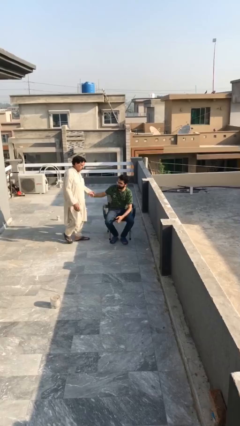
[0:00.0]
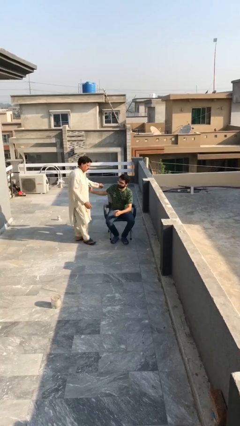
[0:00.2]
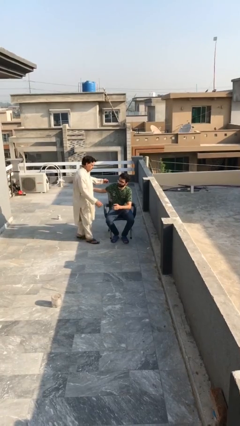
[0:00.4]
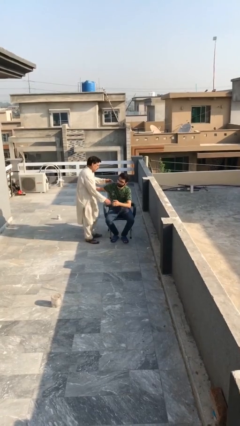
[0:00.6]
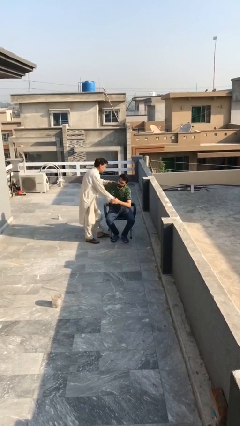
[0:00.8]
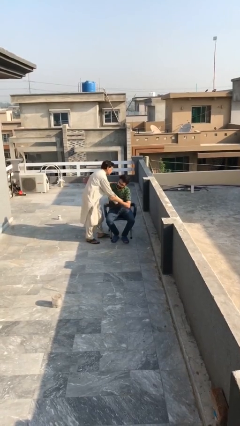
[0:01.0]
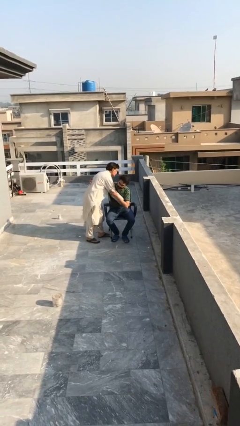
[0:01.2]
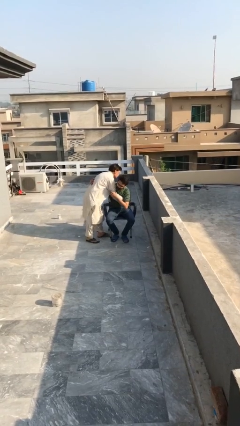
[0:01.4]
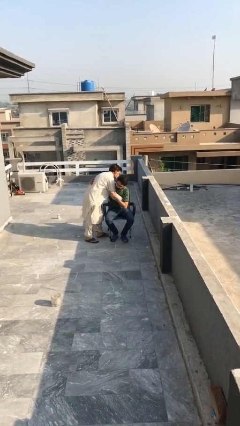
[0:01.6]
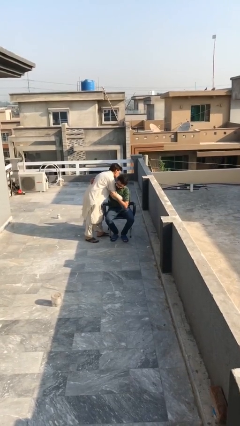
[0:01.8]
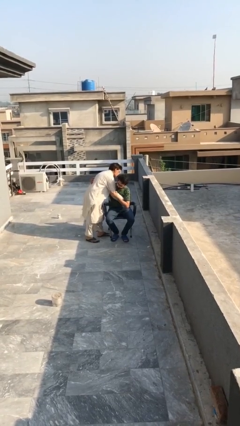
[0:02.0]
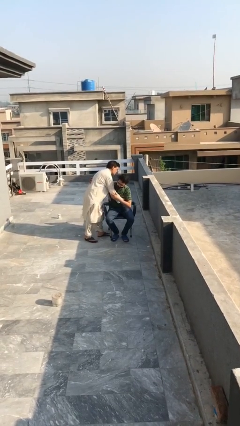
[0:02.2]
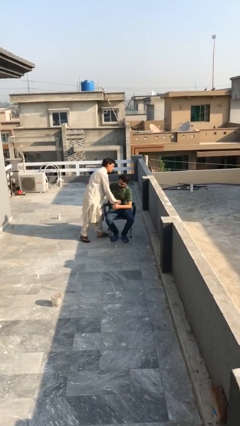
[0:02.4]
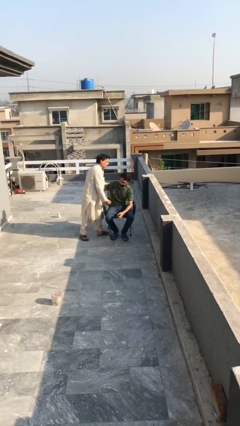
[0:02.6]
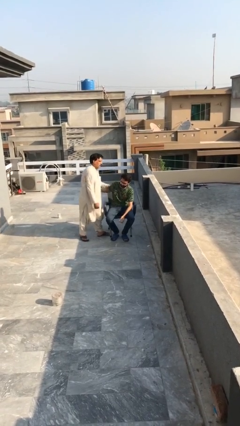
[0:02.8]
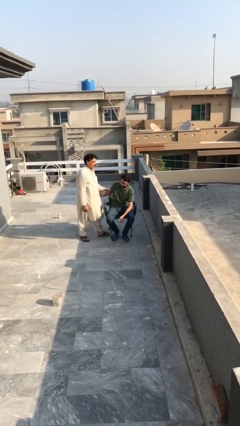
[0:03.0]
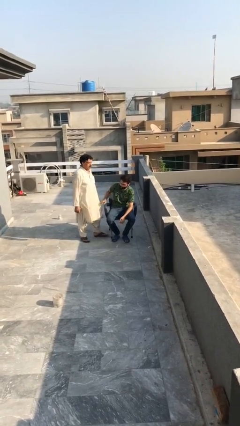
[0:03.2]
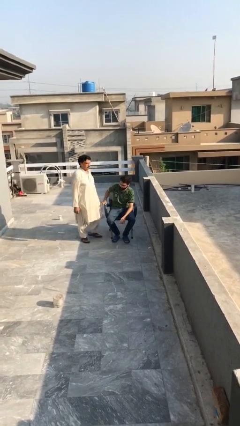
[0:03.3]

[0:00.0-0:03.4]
person embraces person

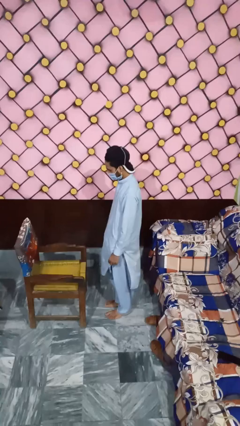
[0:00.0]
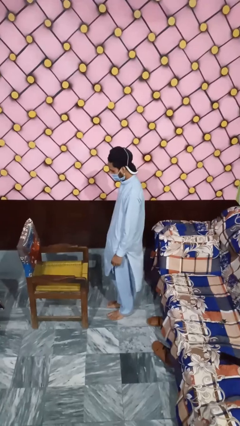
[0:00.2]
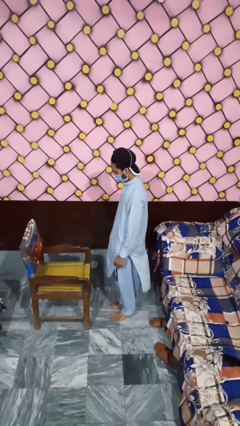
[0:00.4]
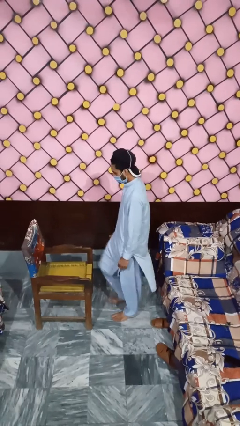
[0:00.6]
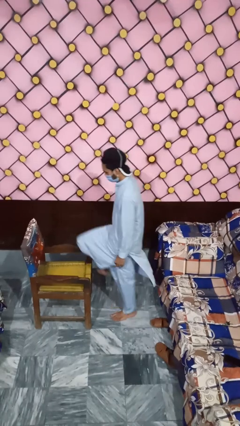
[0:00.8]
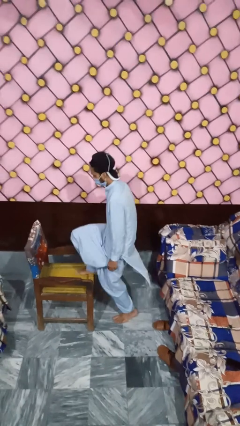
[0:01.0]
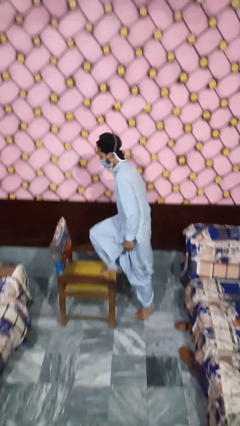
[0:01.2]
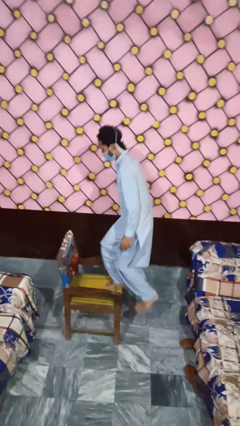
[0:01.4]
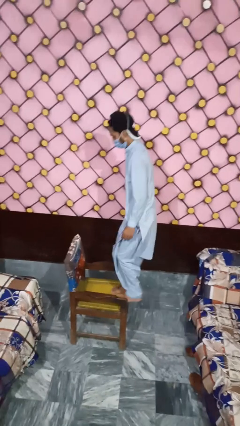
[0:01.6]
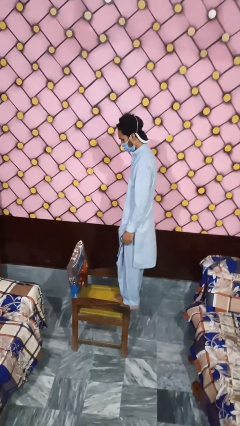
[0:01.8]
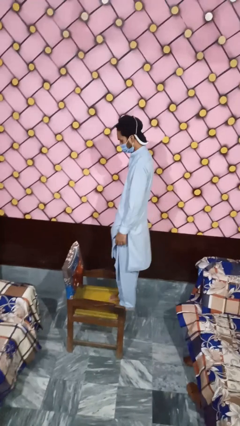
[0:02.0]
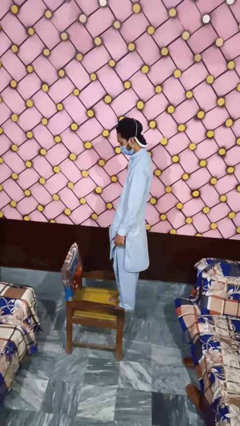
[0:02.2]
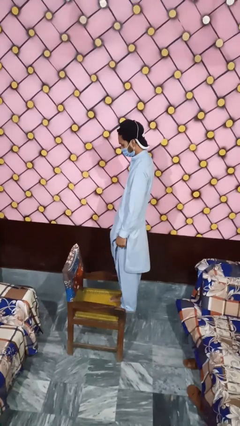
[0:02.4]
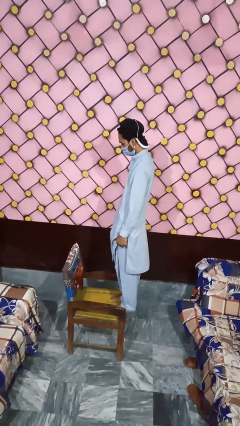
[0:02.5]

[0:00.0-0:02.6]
person climbs on chair

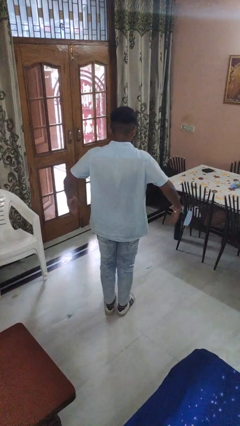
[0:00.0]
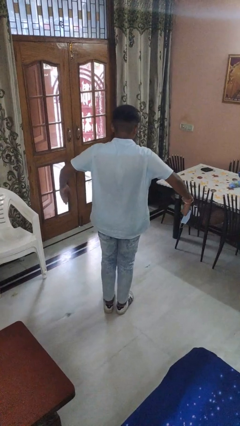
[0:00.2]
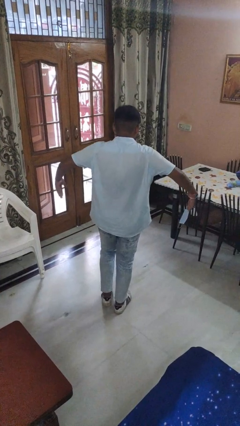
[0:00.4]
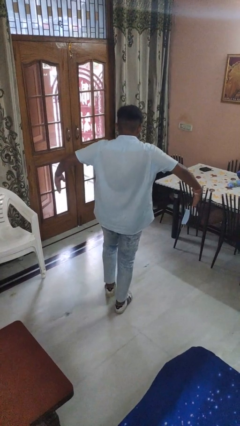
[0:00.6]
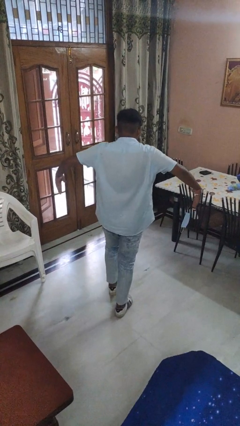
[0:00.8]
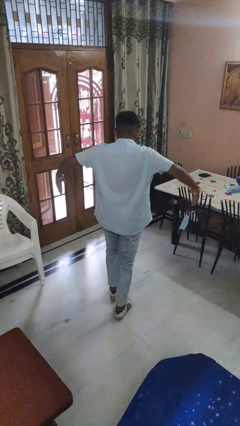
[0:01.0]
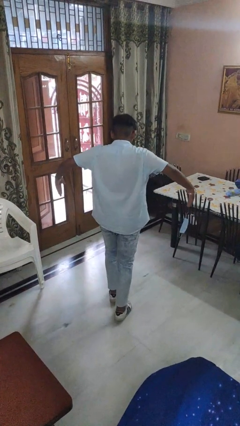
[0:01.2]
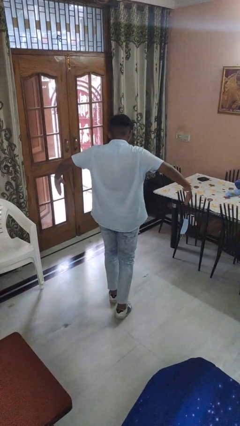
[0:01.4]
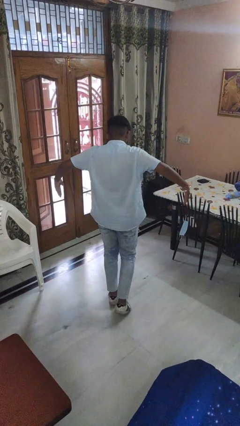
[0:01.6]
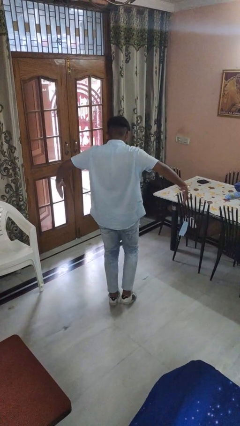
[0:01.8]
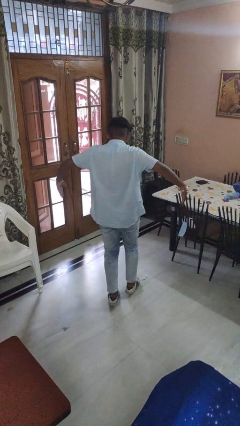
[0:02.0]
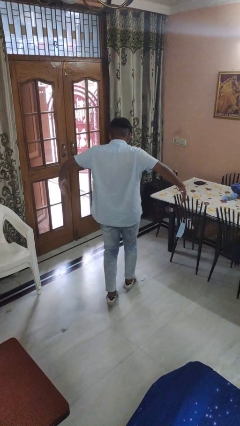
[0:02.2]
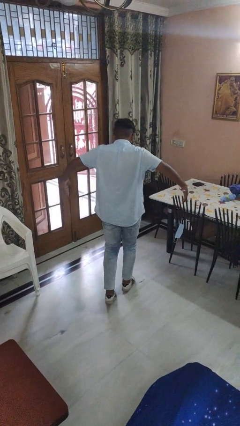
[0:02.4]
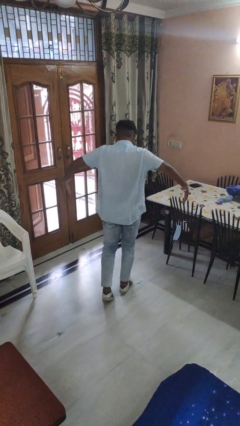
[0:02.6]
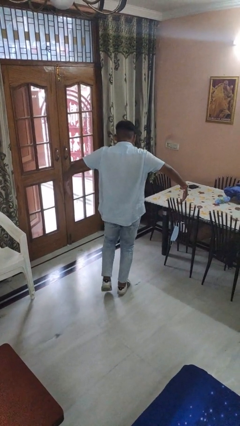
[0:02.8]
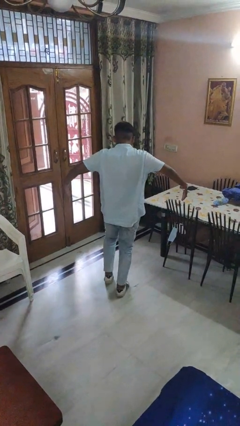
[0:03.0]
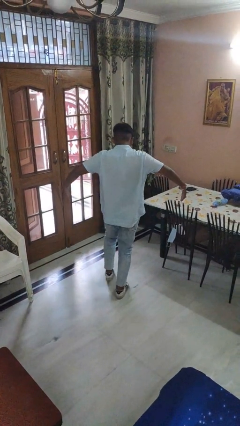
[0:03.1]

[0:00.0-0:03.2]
person walks tiptoe

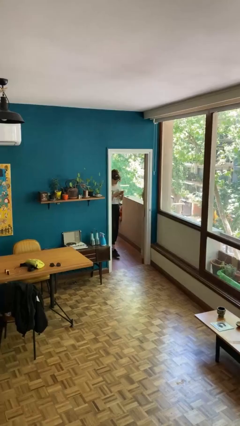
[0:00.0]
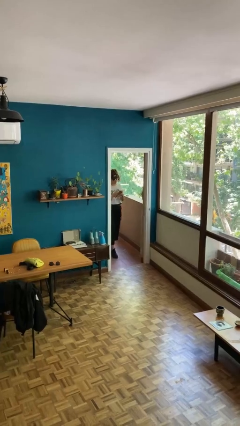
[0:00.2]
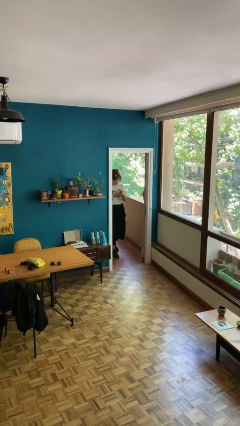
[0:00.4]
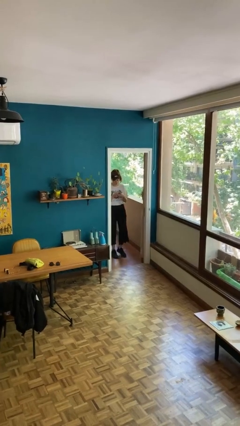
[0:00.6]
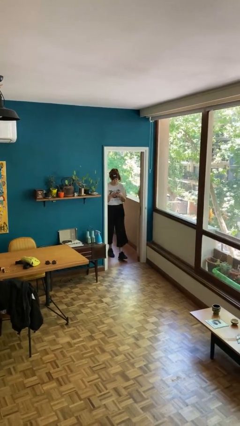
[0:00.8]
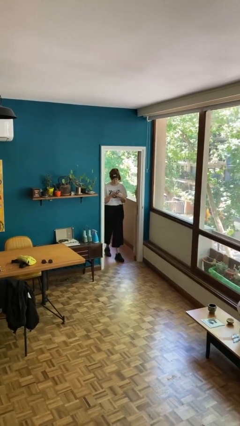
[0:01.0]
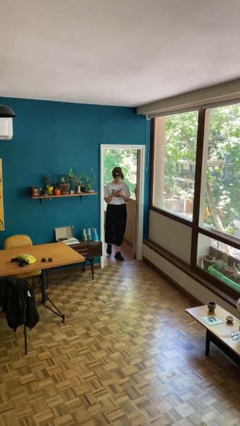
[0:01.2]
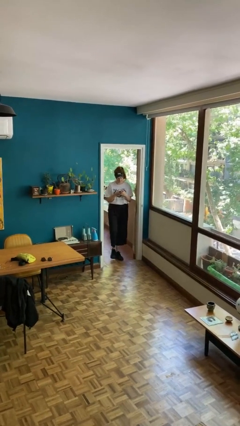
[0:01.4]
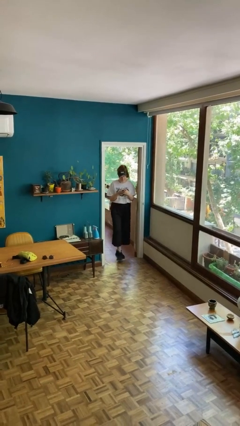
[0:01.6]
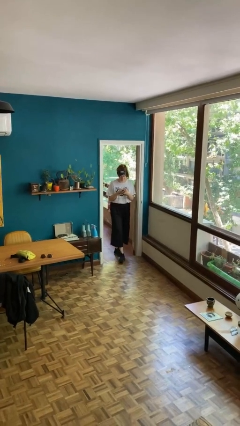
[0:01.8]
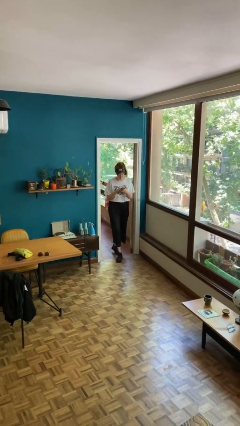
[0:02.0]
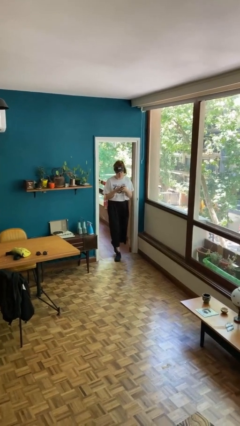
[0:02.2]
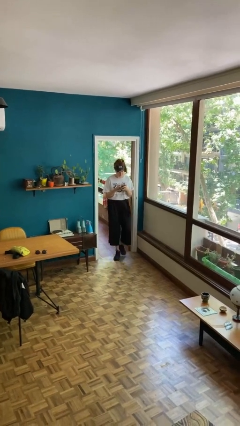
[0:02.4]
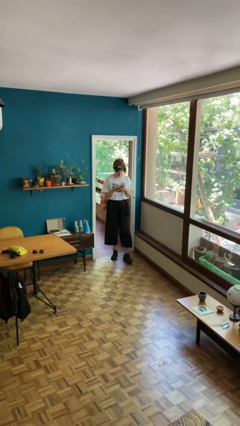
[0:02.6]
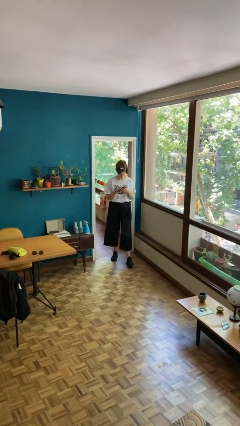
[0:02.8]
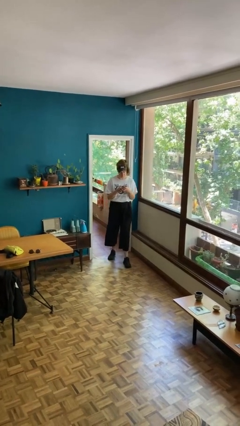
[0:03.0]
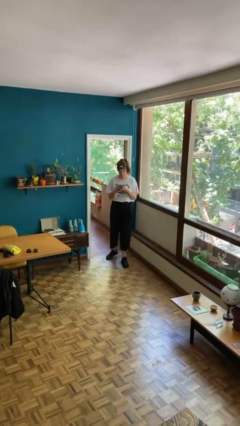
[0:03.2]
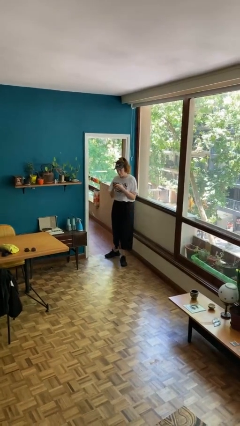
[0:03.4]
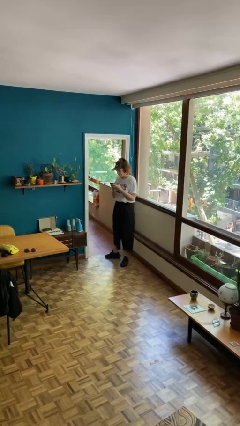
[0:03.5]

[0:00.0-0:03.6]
person enters scene through structure

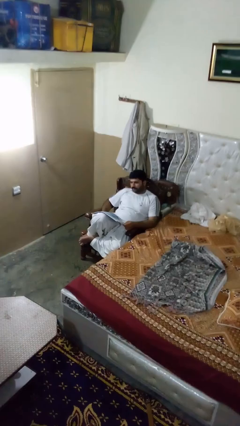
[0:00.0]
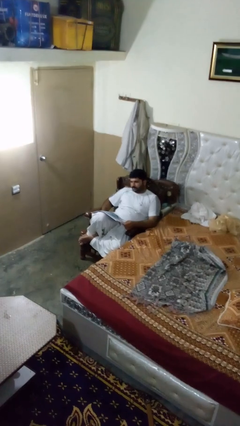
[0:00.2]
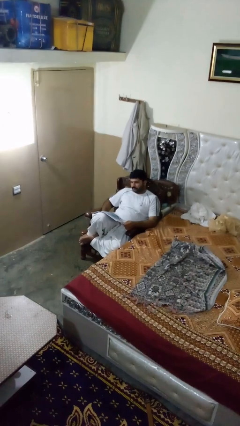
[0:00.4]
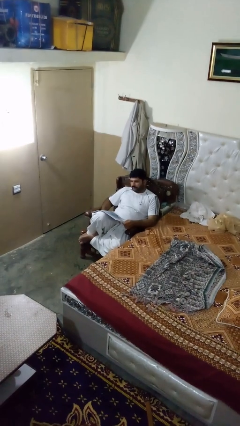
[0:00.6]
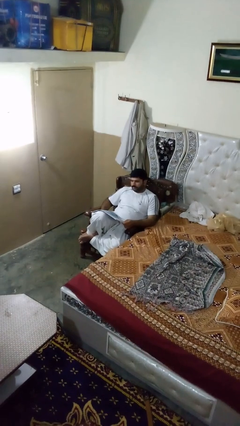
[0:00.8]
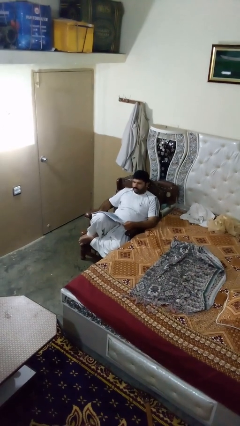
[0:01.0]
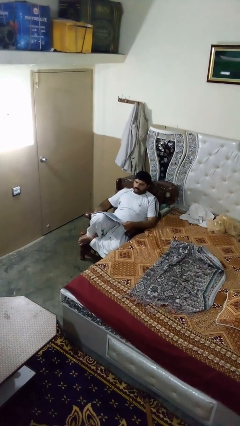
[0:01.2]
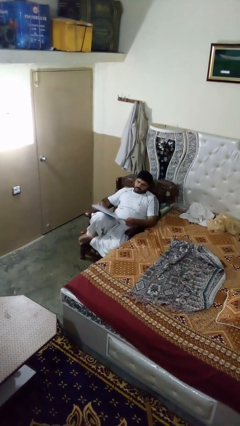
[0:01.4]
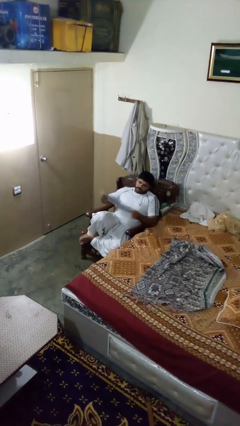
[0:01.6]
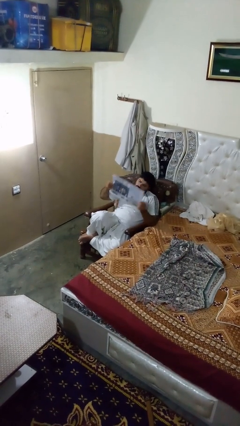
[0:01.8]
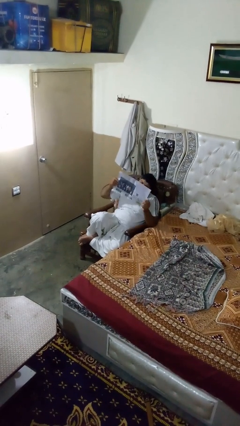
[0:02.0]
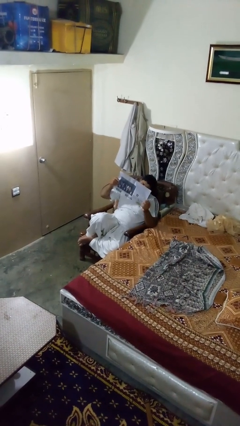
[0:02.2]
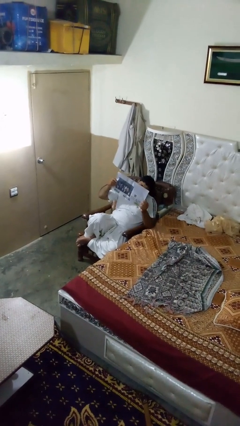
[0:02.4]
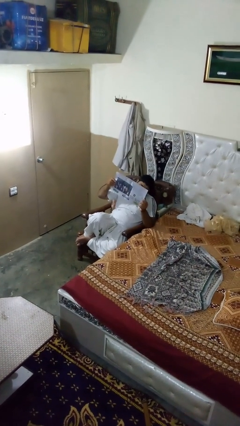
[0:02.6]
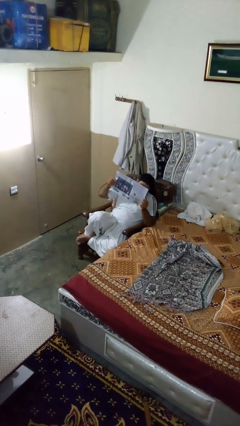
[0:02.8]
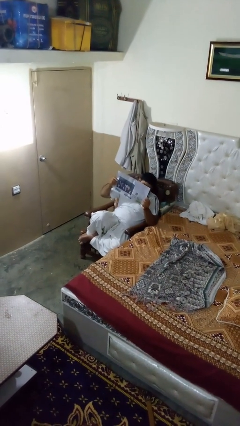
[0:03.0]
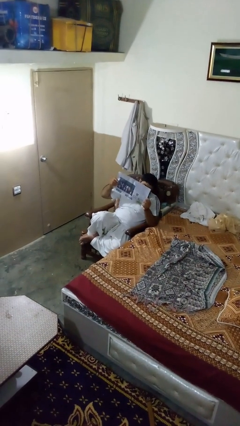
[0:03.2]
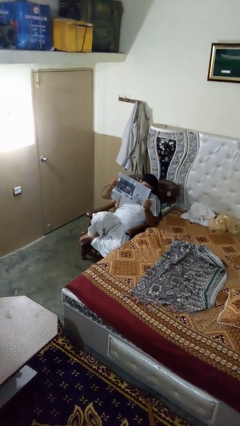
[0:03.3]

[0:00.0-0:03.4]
person reads newspaper

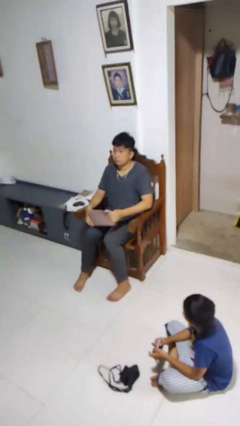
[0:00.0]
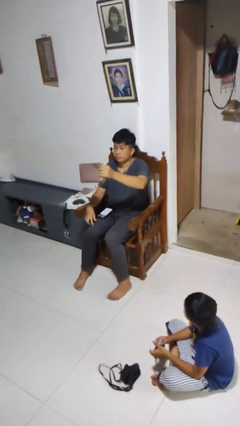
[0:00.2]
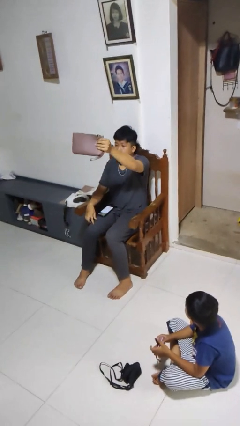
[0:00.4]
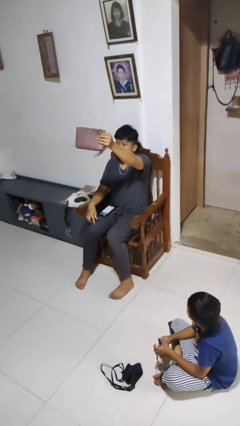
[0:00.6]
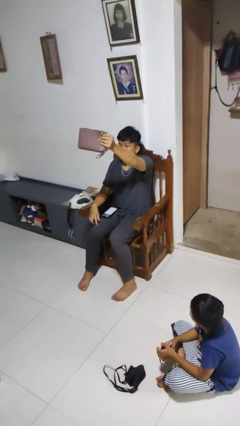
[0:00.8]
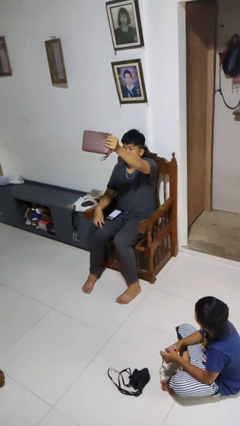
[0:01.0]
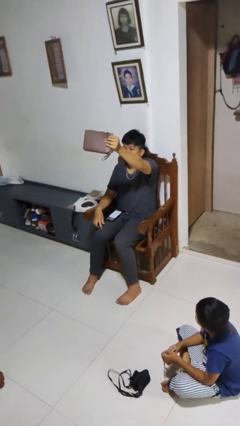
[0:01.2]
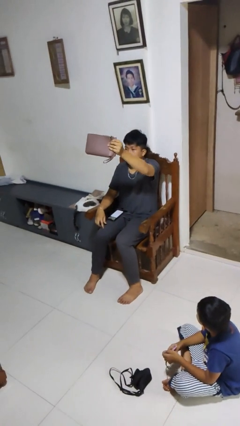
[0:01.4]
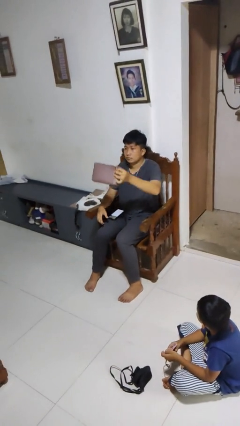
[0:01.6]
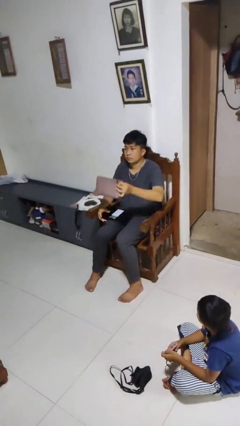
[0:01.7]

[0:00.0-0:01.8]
person holds object above head
